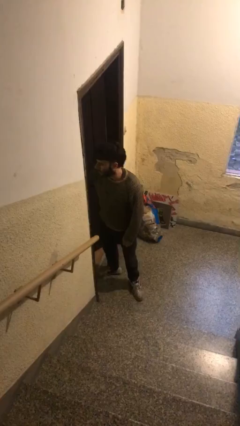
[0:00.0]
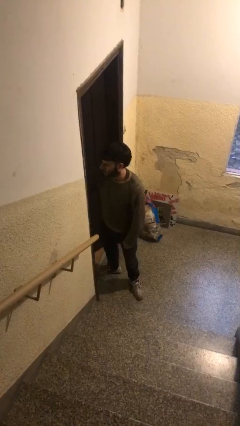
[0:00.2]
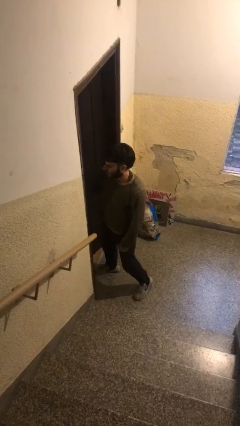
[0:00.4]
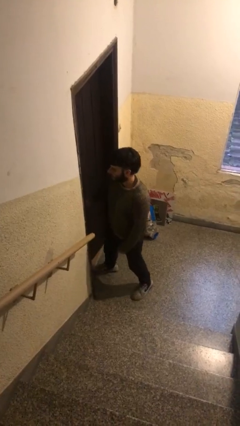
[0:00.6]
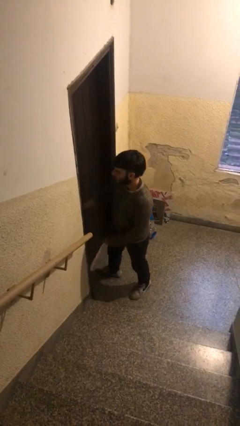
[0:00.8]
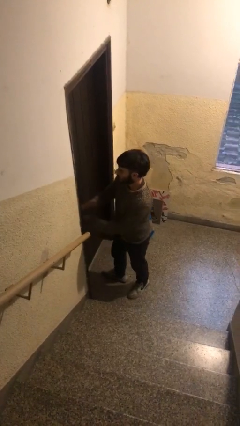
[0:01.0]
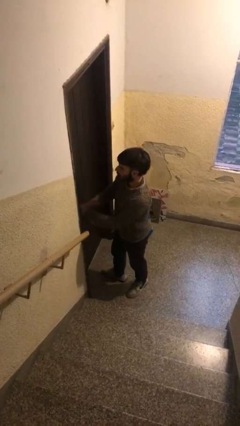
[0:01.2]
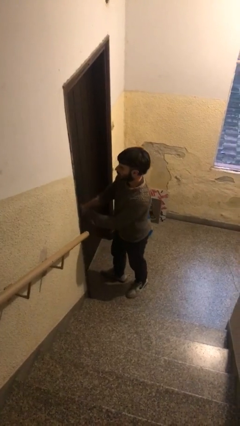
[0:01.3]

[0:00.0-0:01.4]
person closes facility door

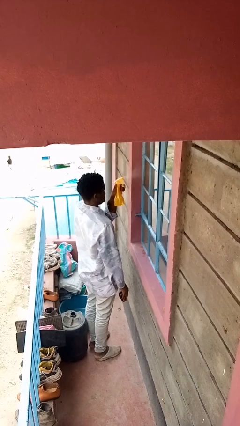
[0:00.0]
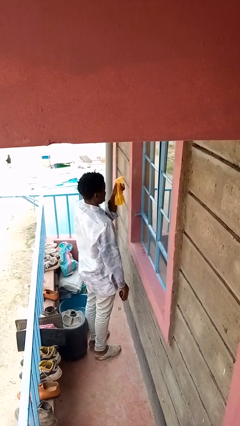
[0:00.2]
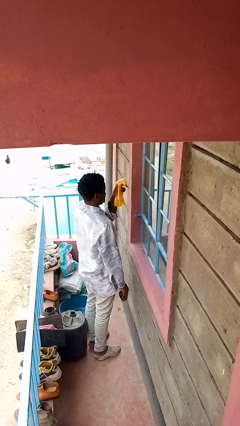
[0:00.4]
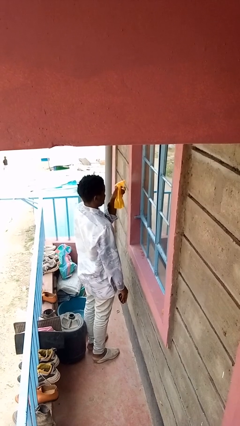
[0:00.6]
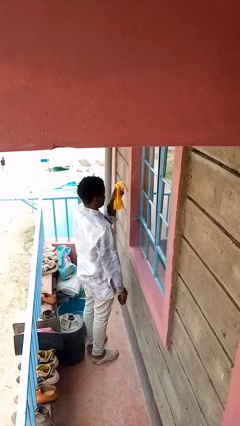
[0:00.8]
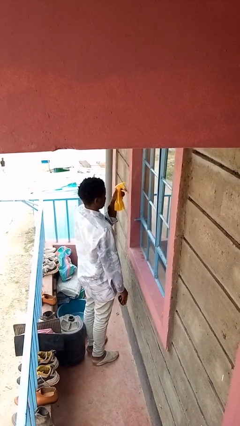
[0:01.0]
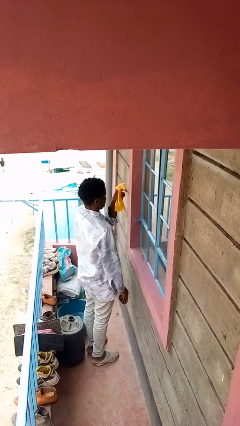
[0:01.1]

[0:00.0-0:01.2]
person sprays from bottle

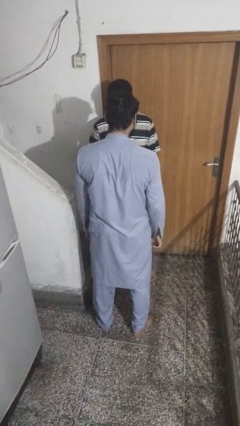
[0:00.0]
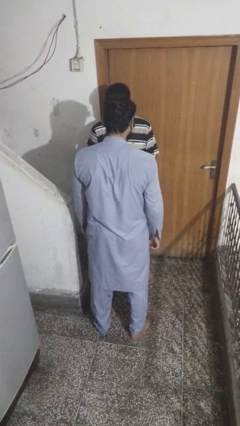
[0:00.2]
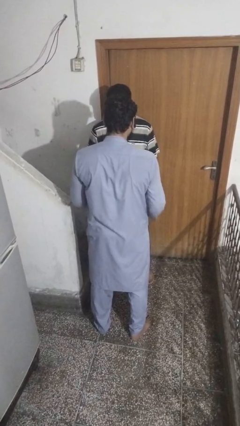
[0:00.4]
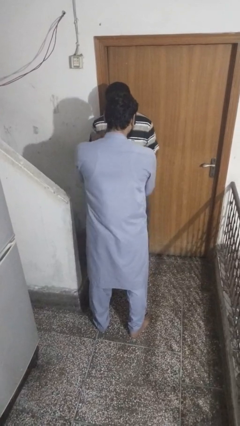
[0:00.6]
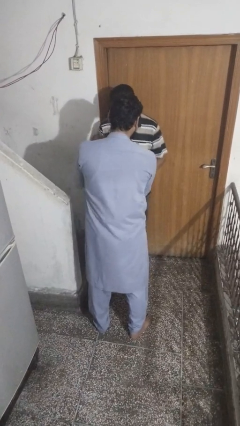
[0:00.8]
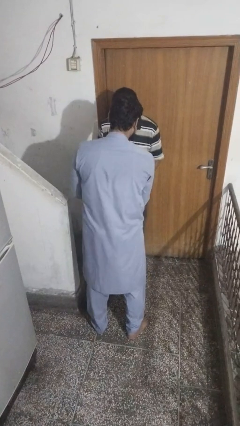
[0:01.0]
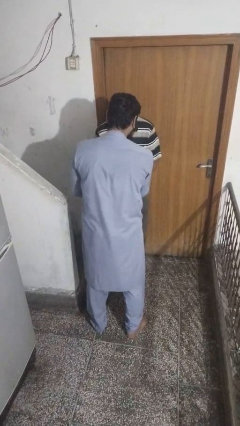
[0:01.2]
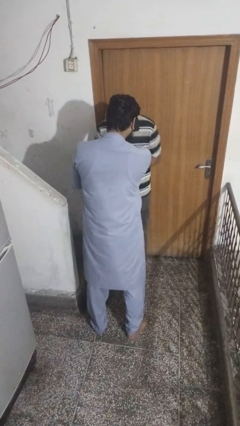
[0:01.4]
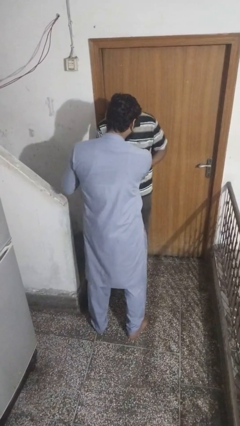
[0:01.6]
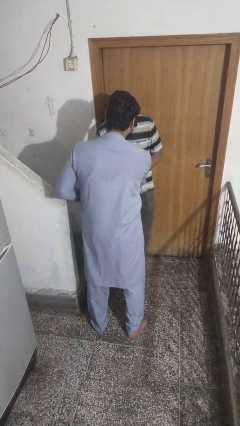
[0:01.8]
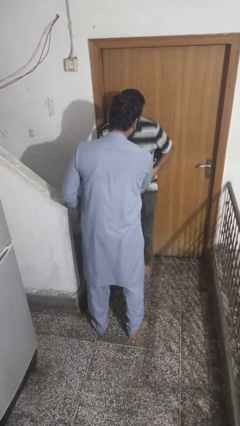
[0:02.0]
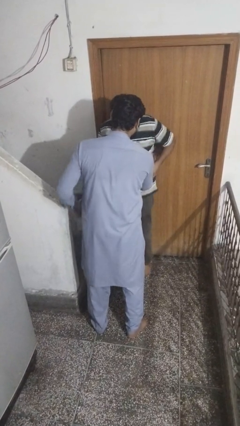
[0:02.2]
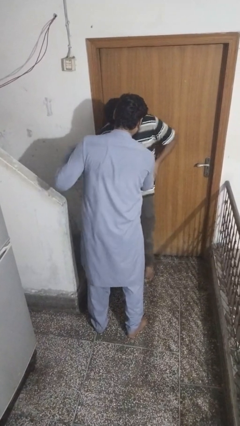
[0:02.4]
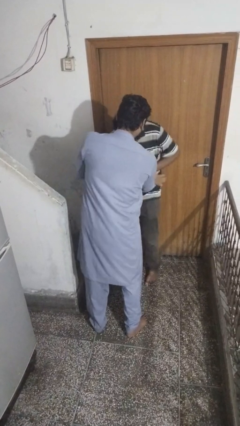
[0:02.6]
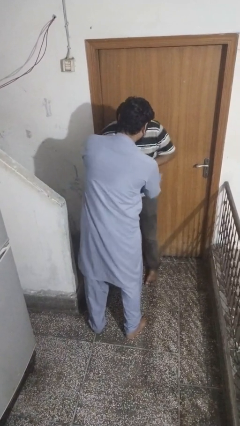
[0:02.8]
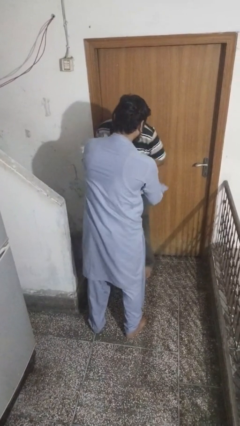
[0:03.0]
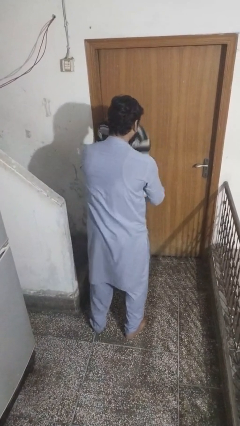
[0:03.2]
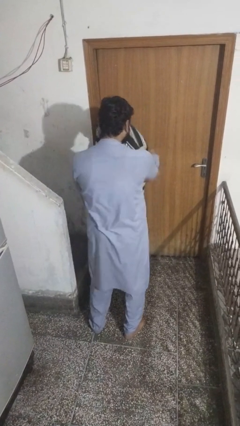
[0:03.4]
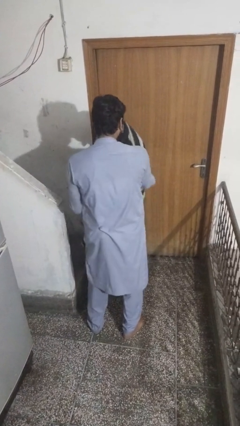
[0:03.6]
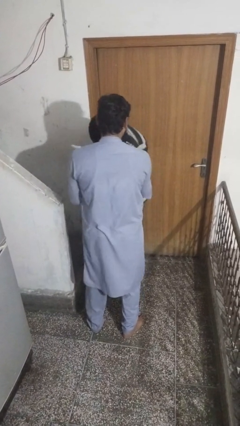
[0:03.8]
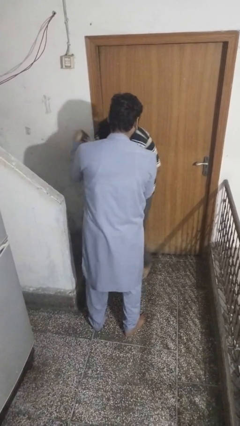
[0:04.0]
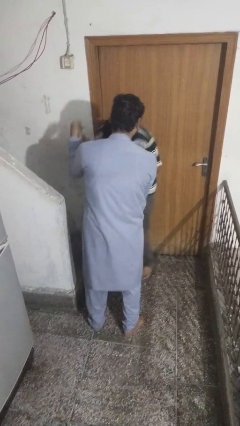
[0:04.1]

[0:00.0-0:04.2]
person tickles person

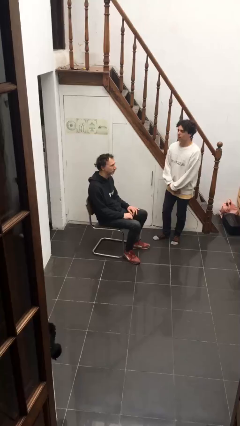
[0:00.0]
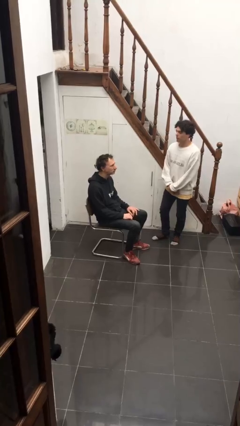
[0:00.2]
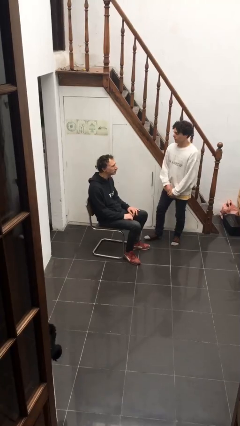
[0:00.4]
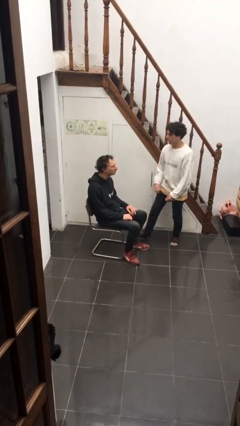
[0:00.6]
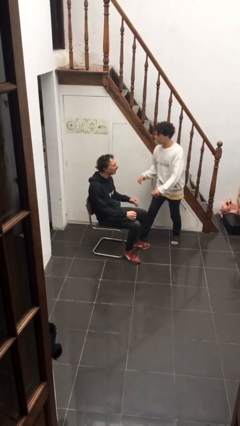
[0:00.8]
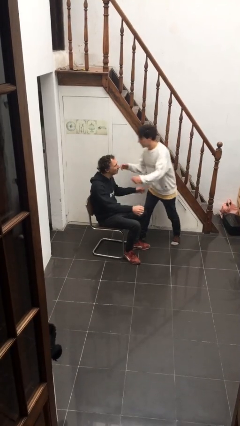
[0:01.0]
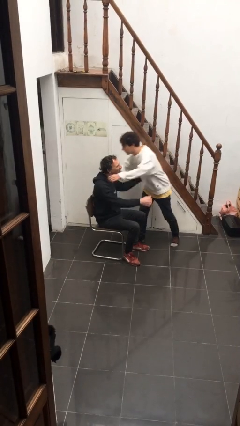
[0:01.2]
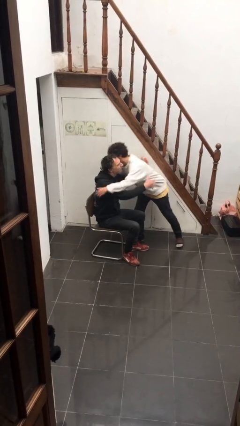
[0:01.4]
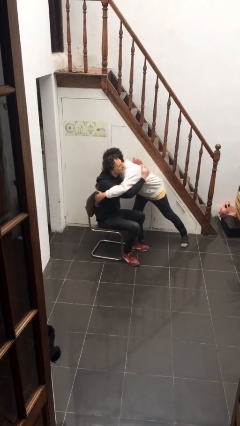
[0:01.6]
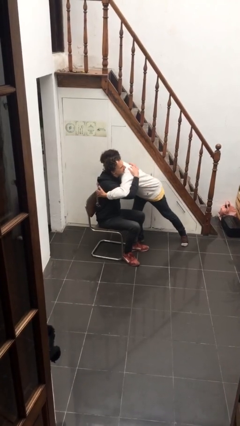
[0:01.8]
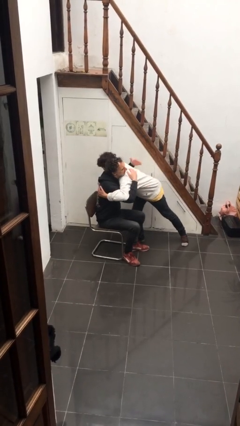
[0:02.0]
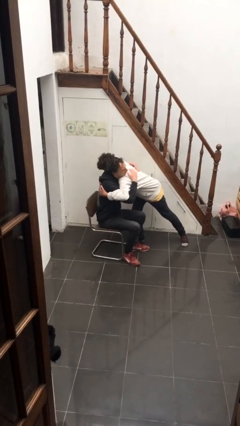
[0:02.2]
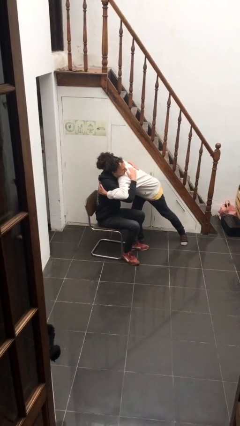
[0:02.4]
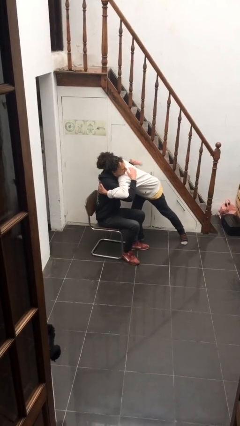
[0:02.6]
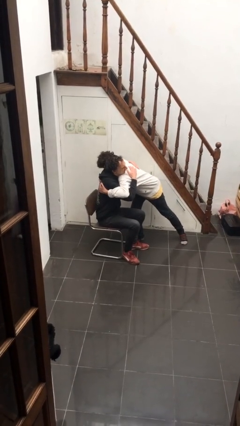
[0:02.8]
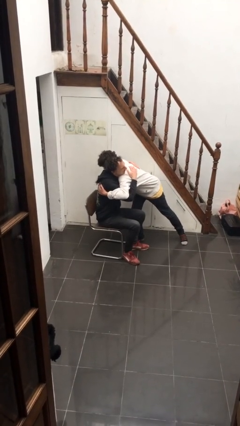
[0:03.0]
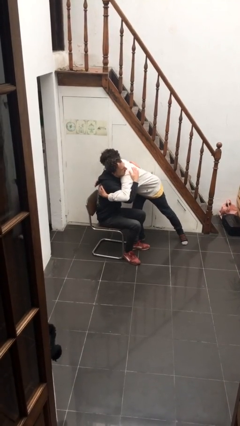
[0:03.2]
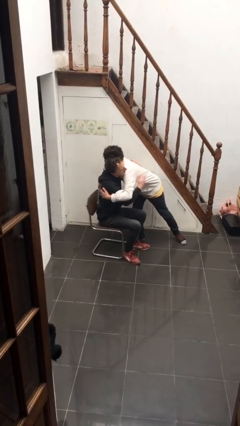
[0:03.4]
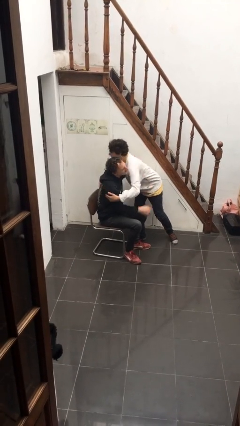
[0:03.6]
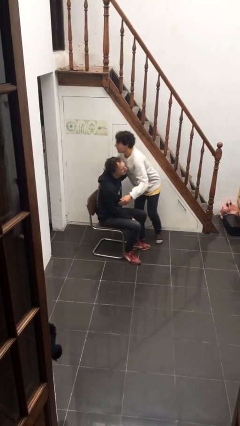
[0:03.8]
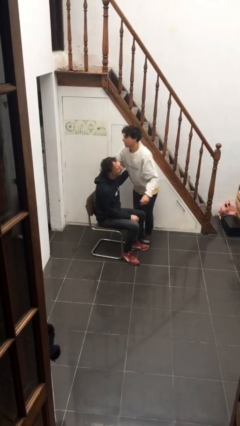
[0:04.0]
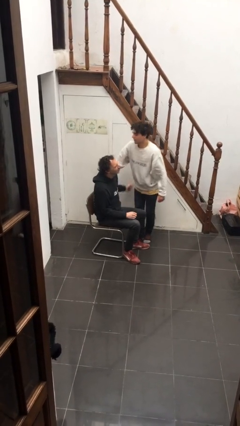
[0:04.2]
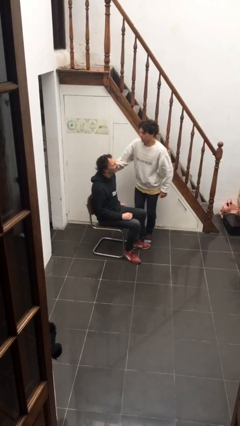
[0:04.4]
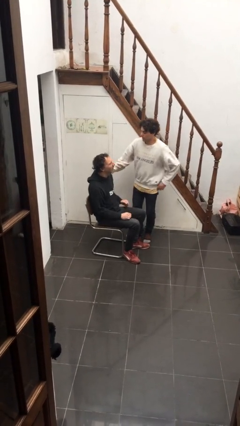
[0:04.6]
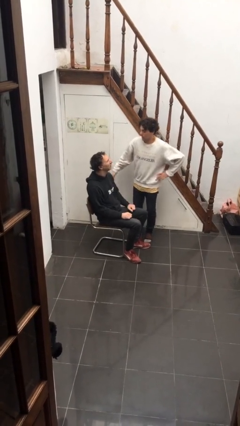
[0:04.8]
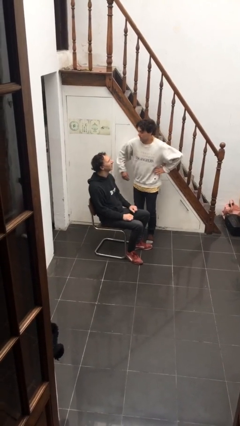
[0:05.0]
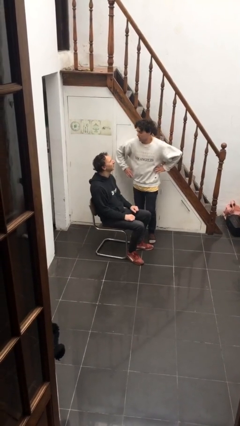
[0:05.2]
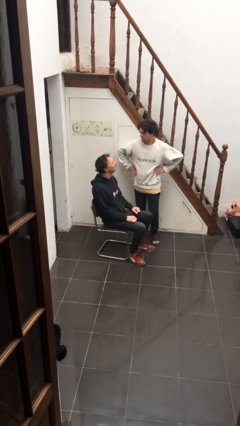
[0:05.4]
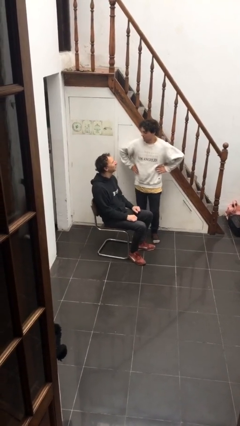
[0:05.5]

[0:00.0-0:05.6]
person embraces person

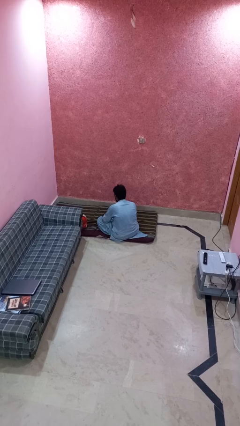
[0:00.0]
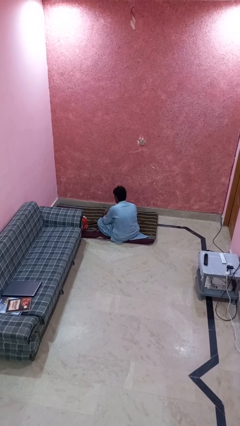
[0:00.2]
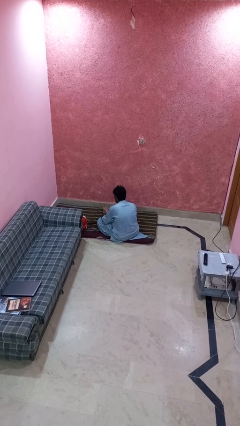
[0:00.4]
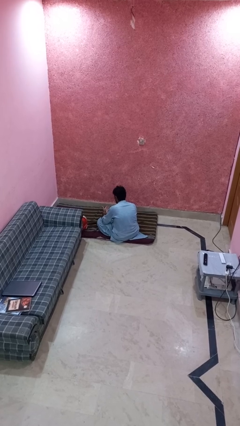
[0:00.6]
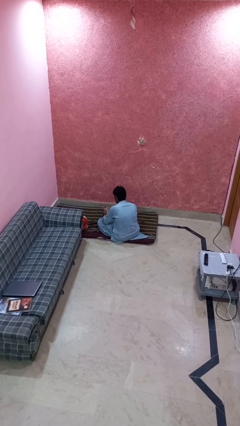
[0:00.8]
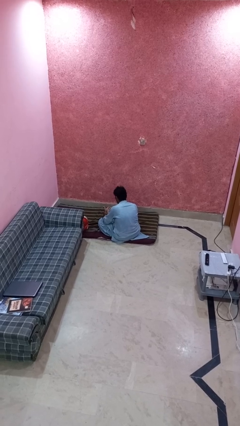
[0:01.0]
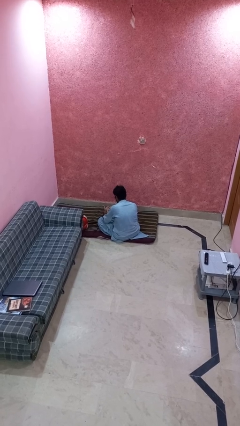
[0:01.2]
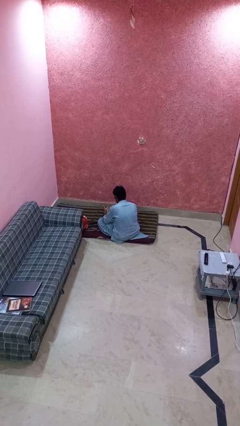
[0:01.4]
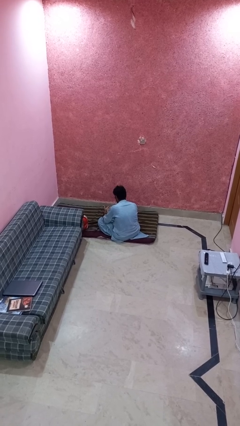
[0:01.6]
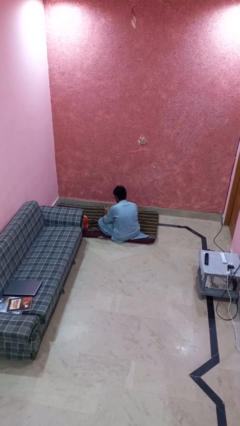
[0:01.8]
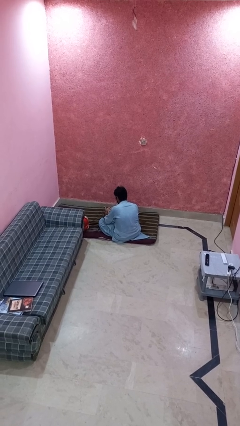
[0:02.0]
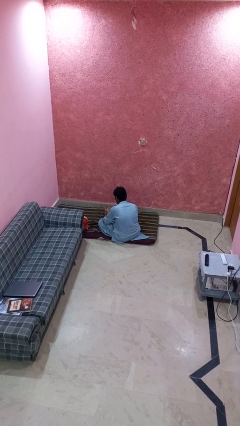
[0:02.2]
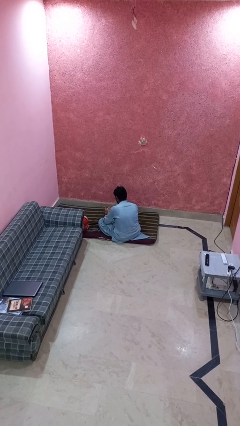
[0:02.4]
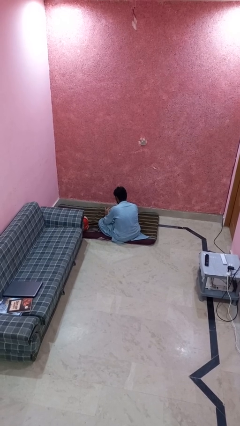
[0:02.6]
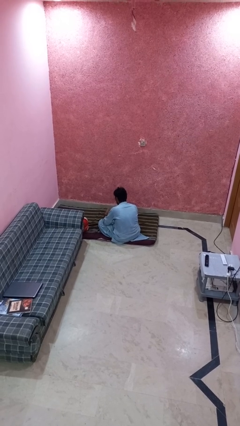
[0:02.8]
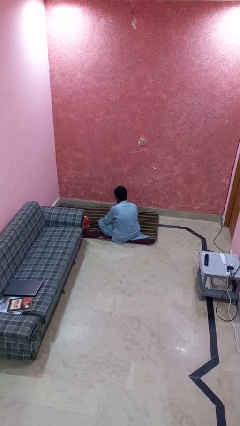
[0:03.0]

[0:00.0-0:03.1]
person looks at hands in lap

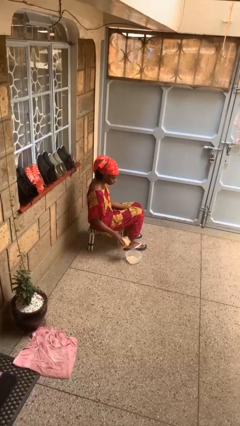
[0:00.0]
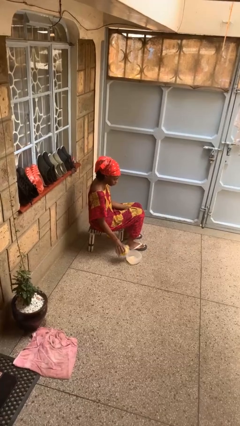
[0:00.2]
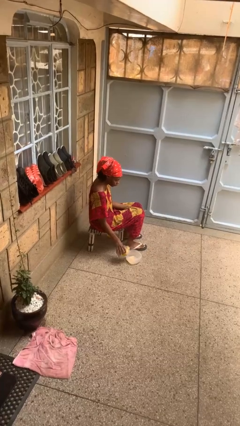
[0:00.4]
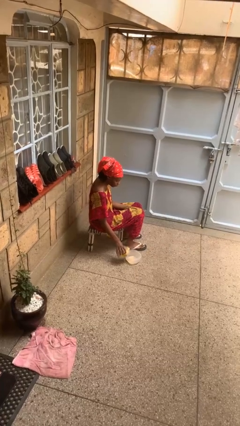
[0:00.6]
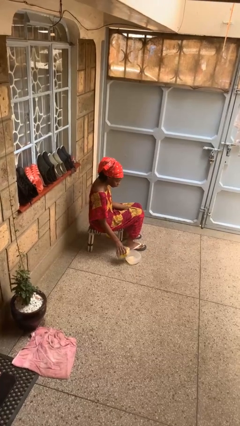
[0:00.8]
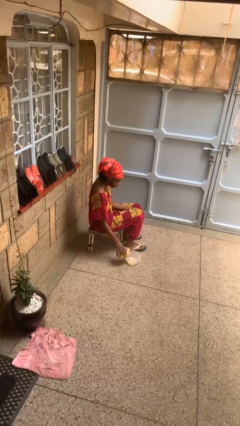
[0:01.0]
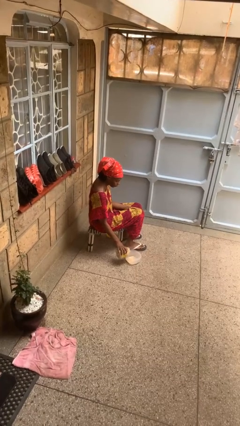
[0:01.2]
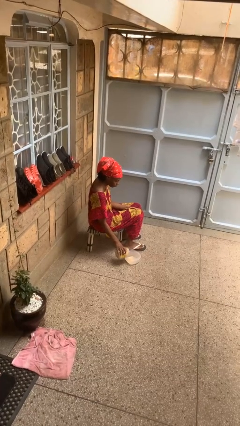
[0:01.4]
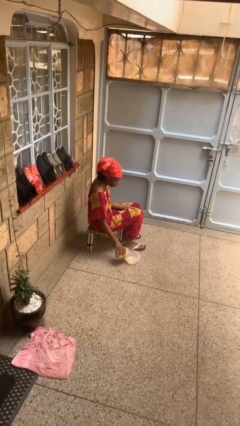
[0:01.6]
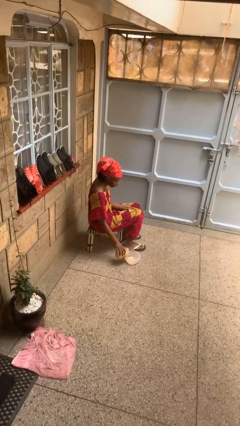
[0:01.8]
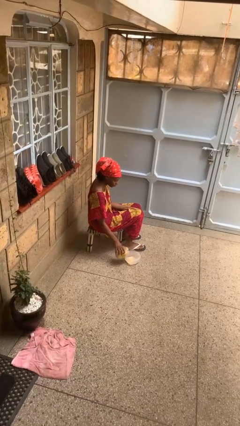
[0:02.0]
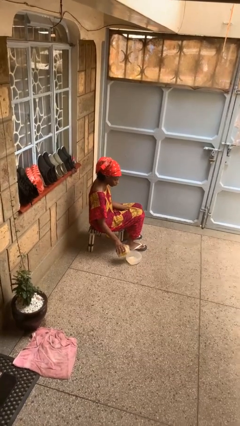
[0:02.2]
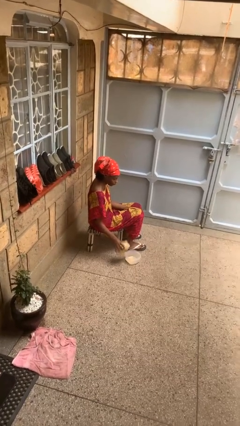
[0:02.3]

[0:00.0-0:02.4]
person pours into bowl
